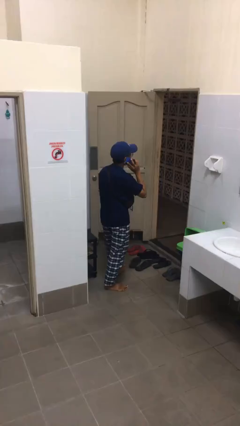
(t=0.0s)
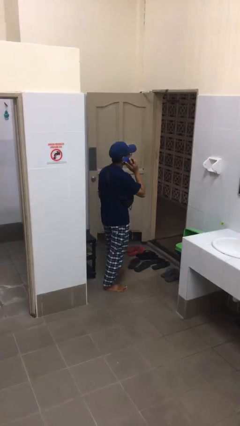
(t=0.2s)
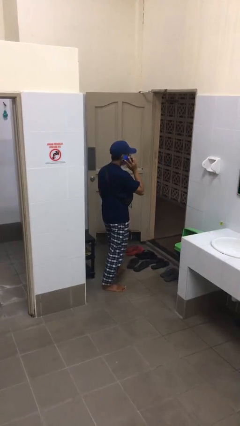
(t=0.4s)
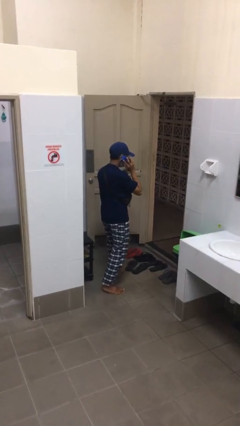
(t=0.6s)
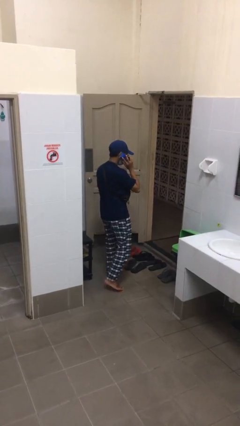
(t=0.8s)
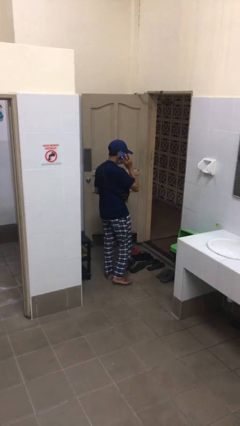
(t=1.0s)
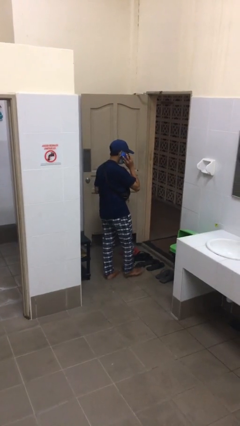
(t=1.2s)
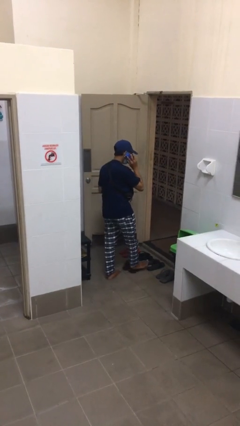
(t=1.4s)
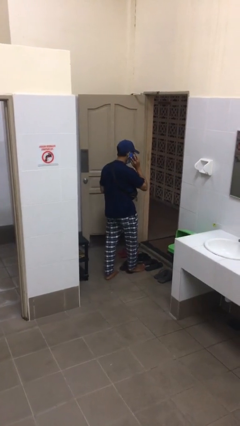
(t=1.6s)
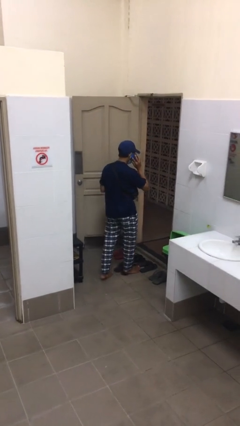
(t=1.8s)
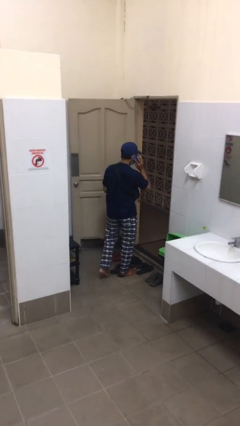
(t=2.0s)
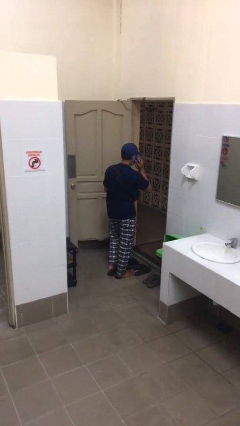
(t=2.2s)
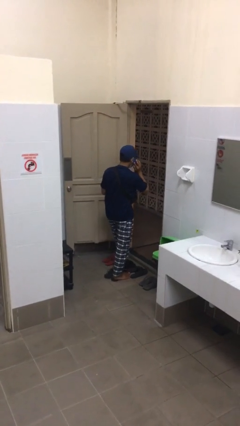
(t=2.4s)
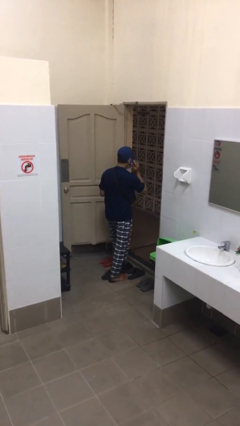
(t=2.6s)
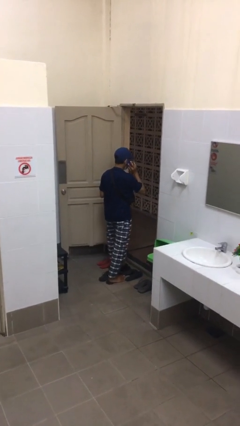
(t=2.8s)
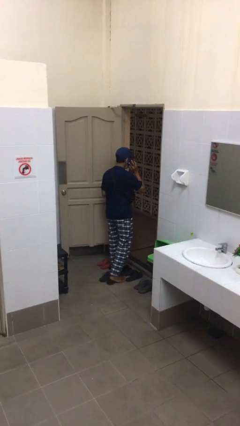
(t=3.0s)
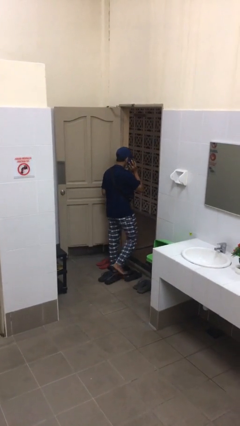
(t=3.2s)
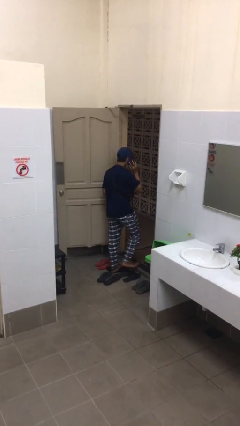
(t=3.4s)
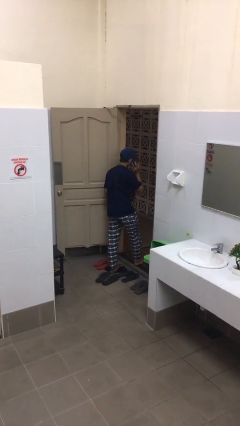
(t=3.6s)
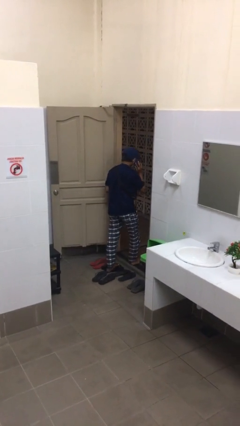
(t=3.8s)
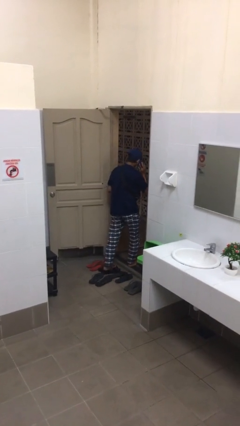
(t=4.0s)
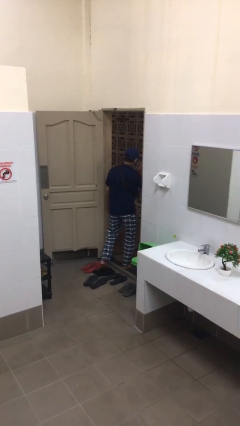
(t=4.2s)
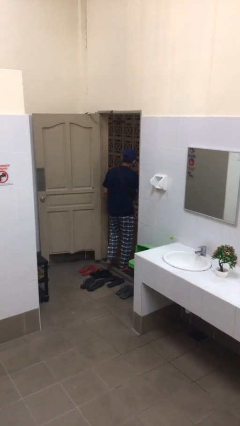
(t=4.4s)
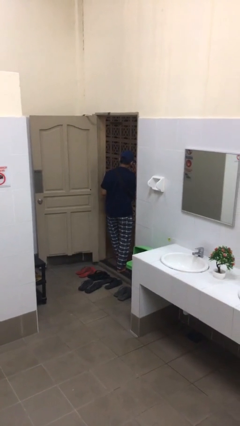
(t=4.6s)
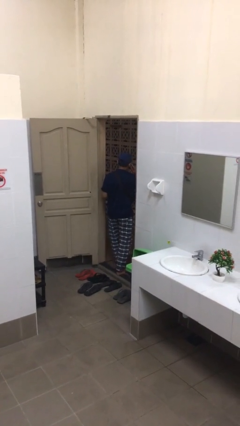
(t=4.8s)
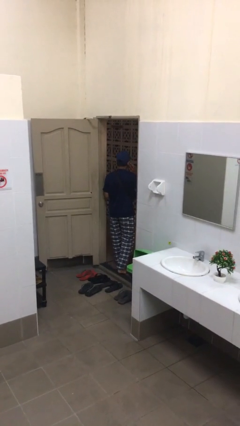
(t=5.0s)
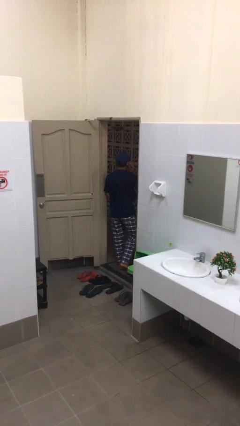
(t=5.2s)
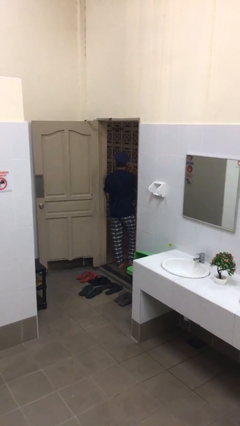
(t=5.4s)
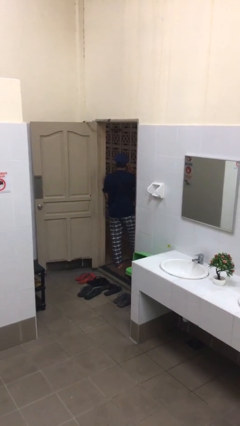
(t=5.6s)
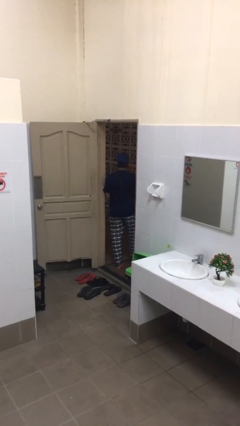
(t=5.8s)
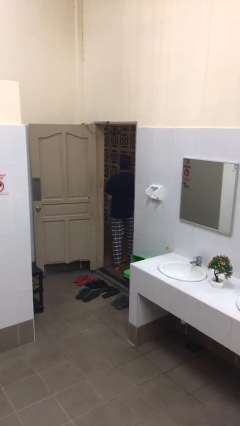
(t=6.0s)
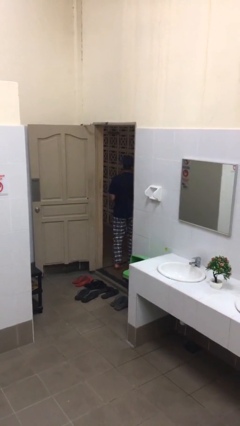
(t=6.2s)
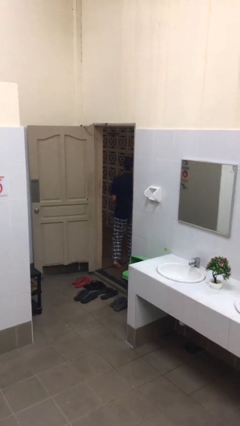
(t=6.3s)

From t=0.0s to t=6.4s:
person exits scene through structure

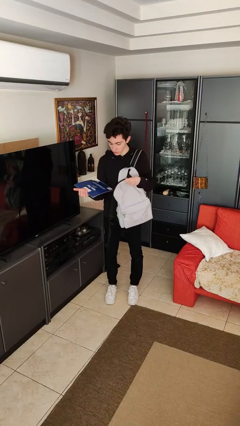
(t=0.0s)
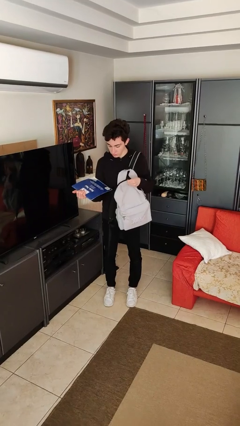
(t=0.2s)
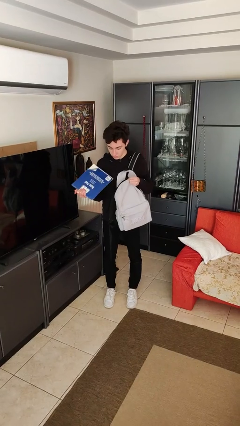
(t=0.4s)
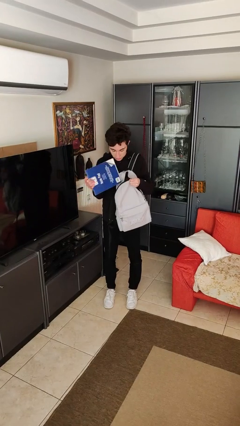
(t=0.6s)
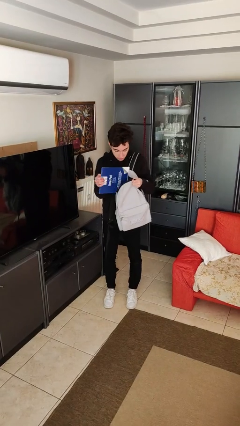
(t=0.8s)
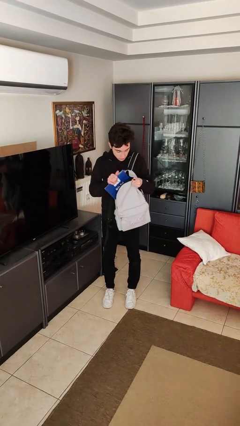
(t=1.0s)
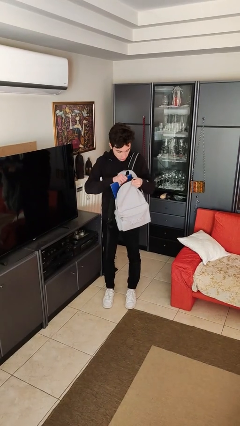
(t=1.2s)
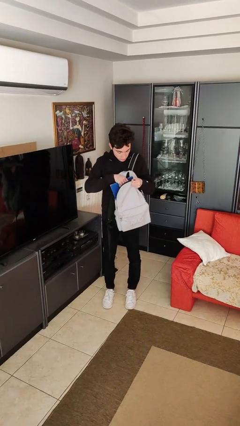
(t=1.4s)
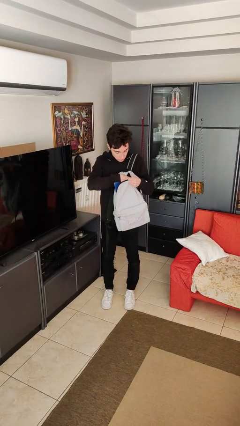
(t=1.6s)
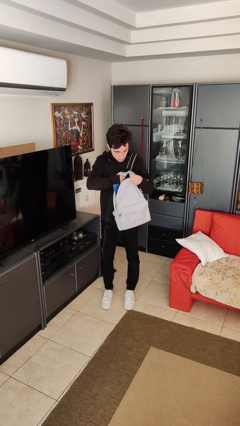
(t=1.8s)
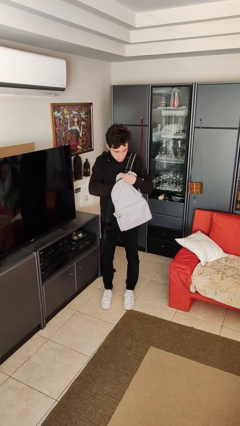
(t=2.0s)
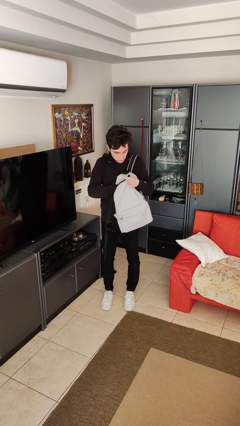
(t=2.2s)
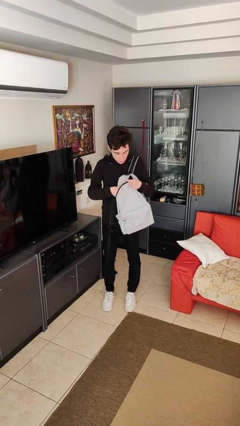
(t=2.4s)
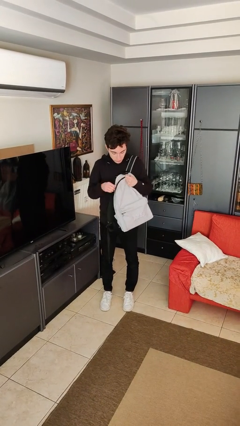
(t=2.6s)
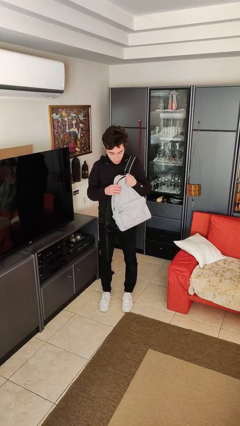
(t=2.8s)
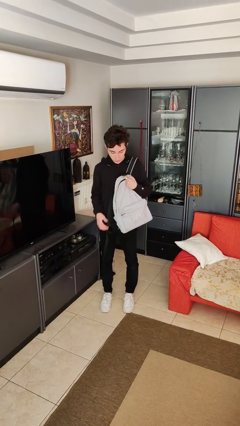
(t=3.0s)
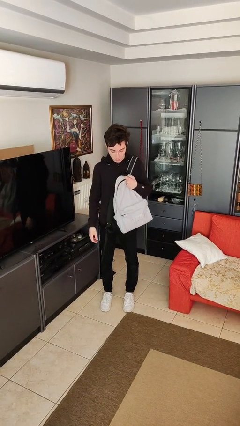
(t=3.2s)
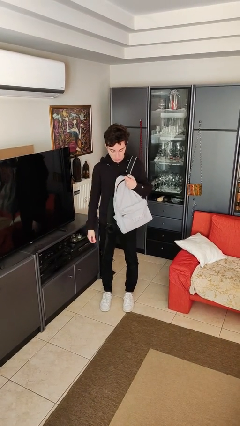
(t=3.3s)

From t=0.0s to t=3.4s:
person puts object into backpack

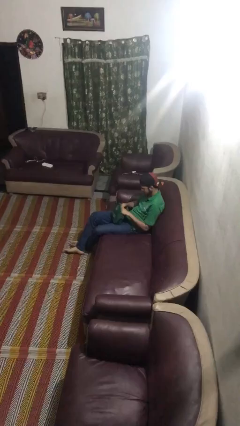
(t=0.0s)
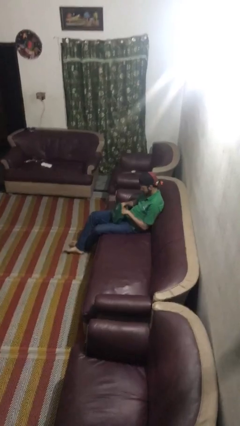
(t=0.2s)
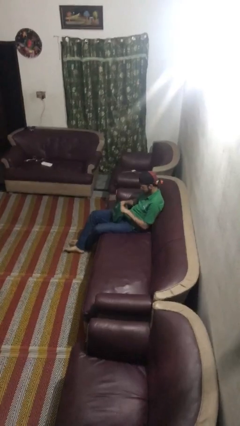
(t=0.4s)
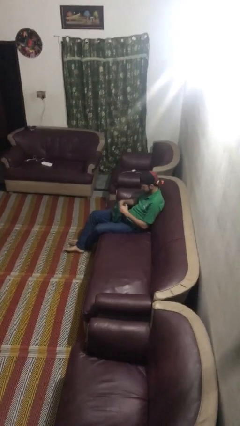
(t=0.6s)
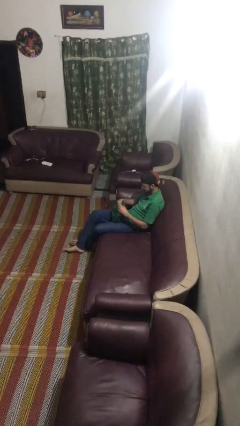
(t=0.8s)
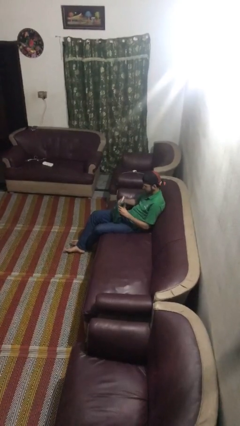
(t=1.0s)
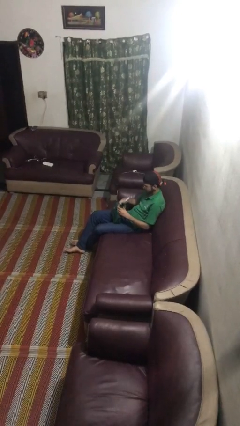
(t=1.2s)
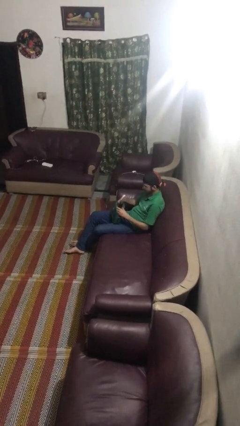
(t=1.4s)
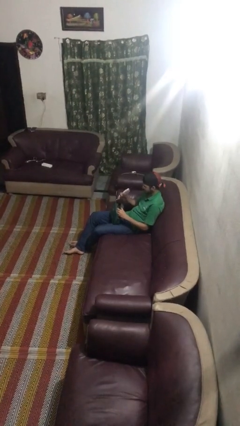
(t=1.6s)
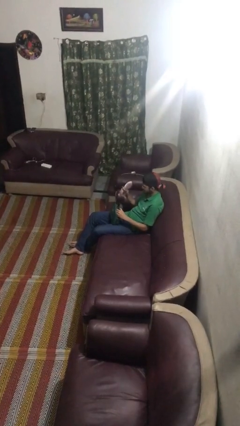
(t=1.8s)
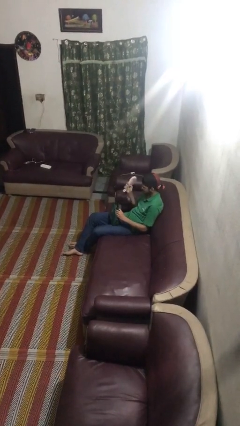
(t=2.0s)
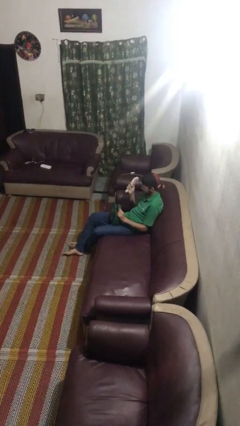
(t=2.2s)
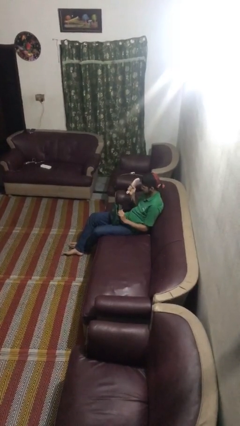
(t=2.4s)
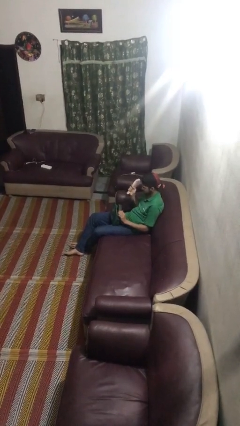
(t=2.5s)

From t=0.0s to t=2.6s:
person takes object from purse

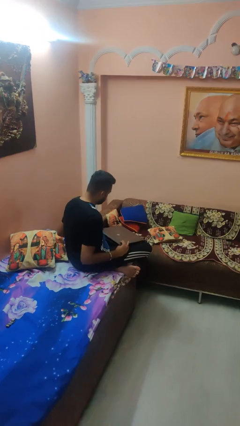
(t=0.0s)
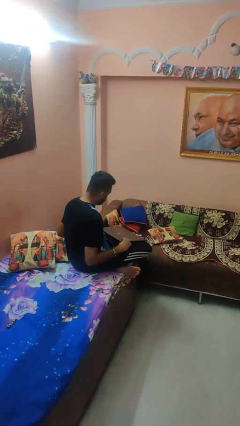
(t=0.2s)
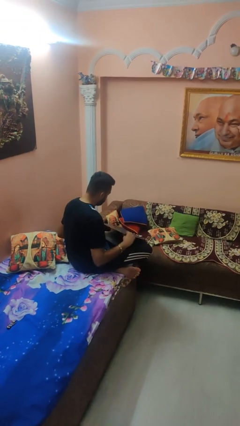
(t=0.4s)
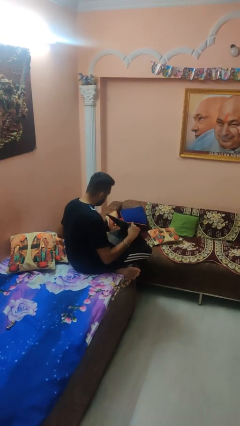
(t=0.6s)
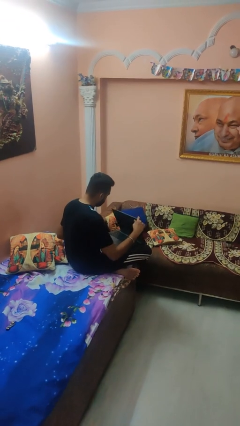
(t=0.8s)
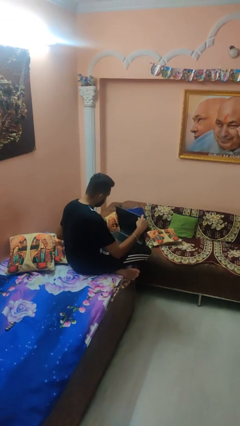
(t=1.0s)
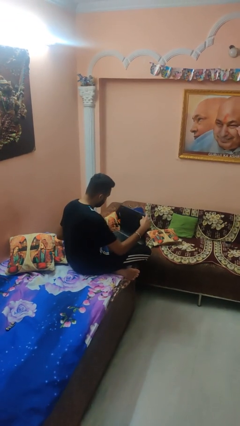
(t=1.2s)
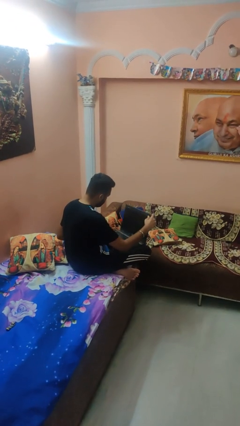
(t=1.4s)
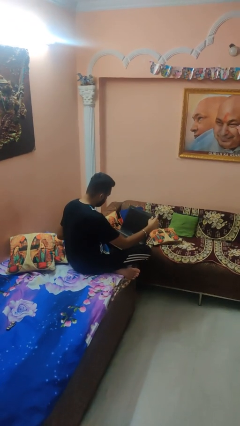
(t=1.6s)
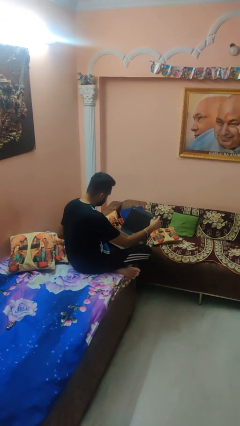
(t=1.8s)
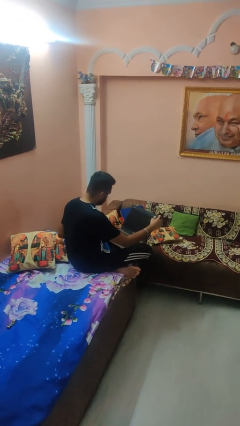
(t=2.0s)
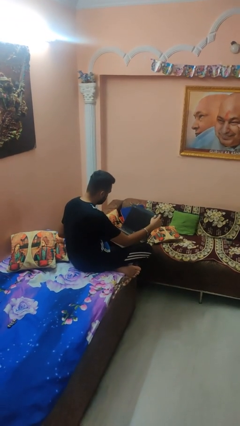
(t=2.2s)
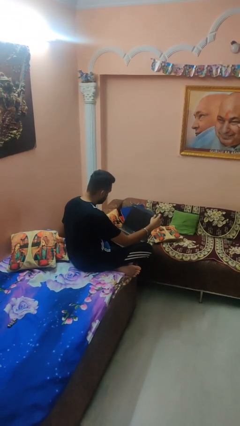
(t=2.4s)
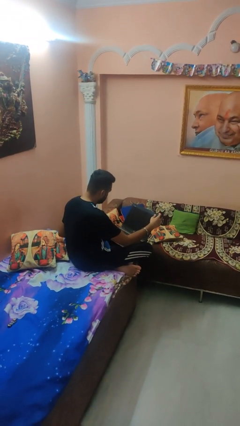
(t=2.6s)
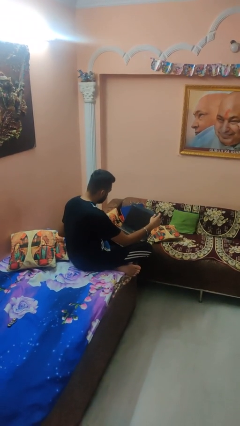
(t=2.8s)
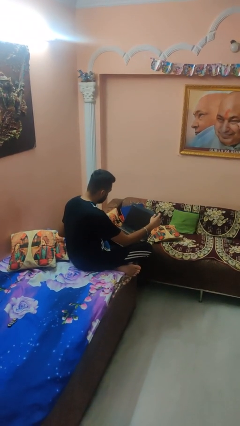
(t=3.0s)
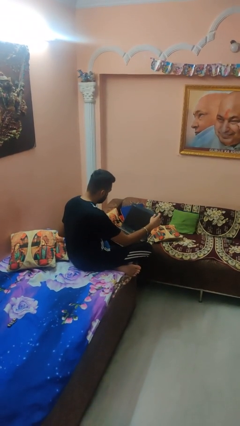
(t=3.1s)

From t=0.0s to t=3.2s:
person opens laptop

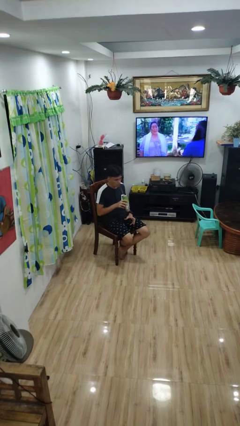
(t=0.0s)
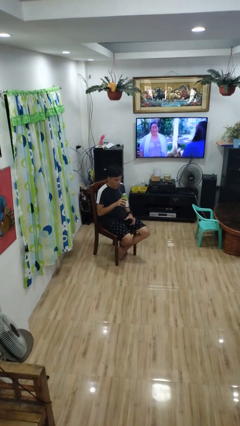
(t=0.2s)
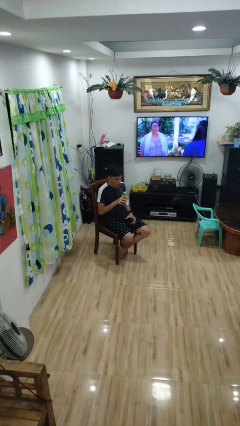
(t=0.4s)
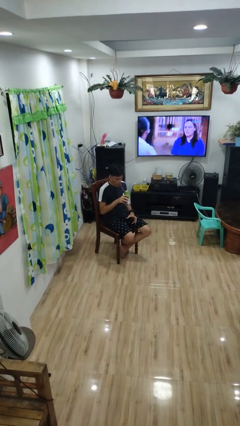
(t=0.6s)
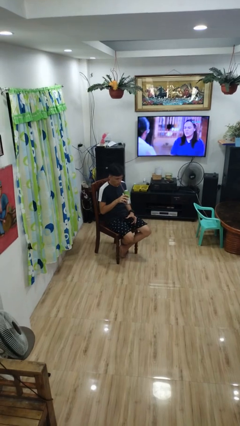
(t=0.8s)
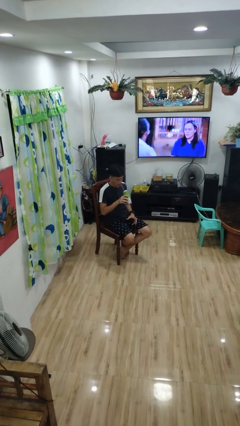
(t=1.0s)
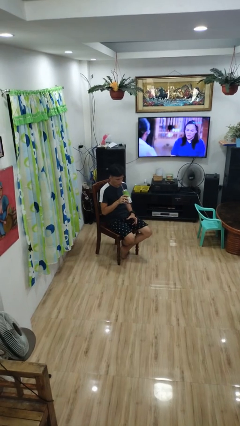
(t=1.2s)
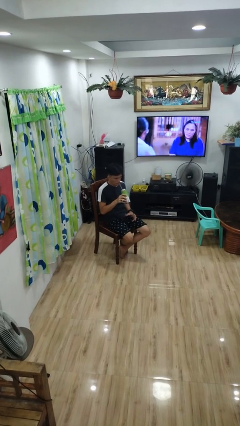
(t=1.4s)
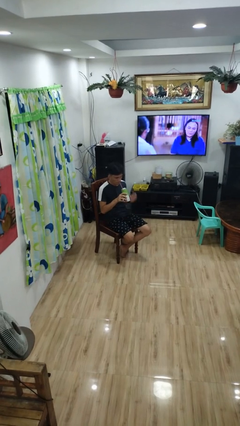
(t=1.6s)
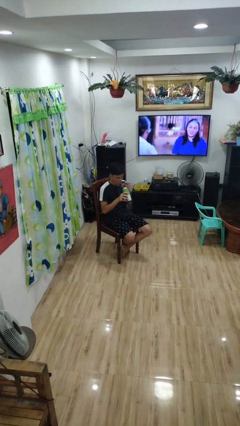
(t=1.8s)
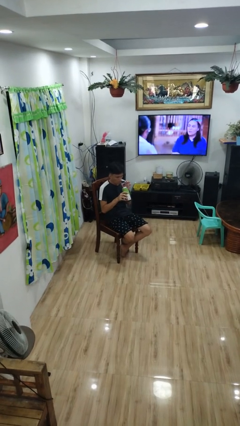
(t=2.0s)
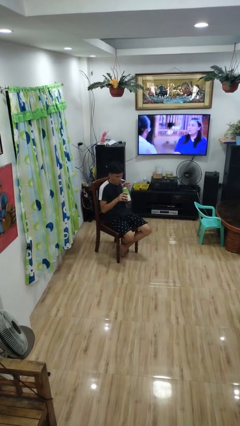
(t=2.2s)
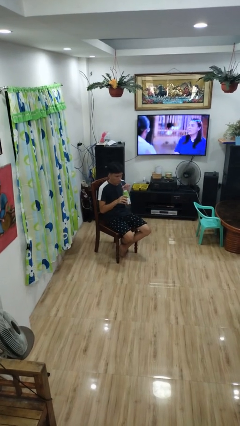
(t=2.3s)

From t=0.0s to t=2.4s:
person drinks from straw
